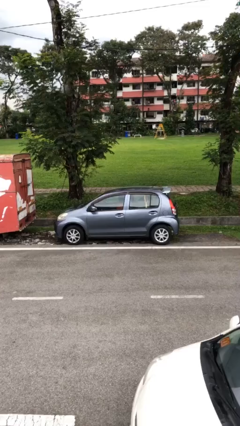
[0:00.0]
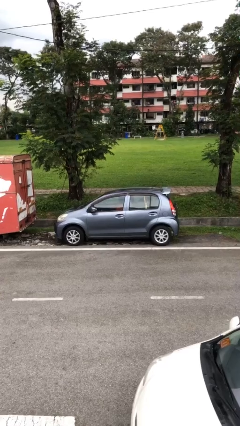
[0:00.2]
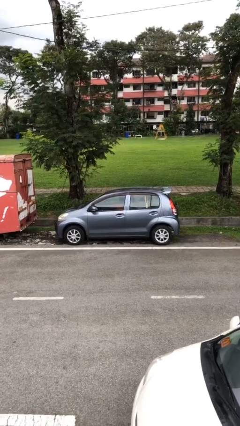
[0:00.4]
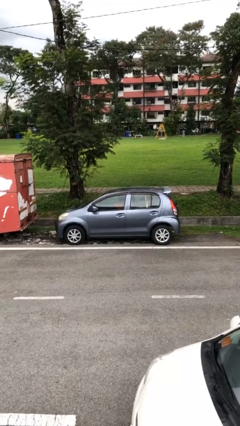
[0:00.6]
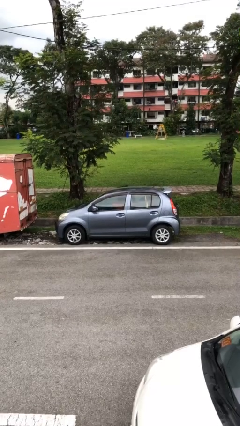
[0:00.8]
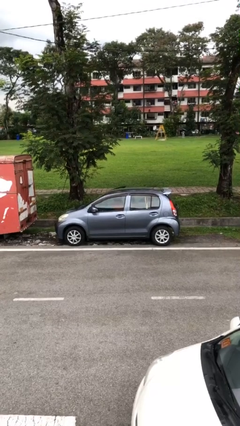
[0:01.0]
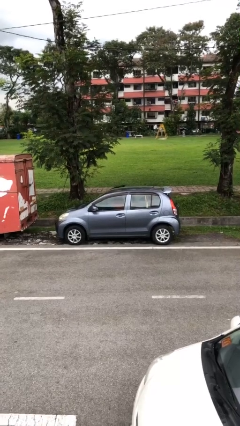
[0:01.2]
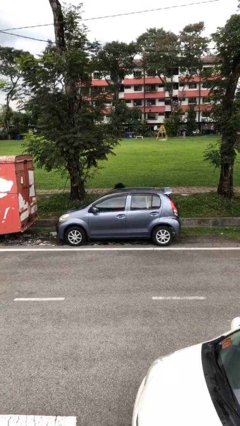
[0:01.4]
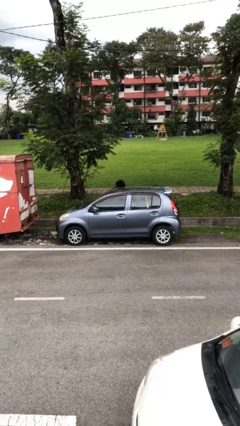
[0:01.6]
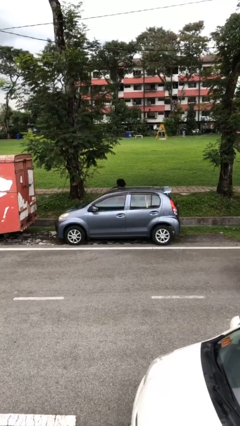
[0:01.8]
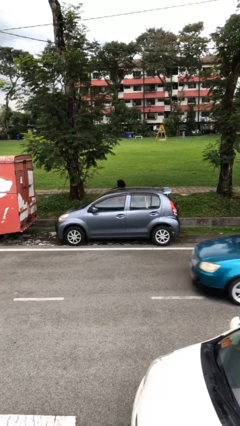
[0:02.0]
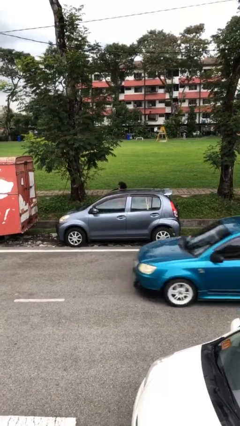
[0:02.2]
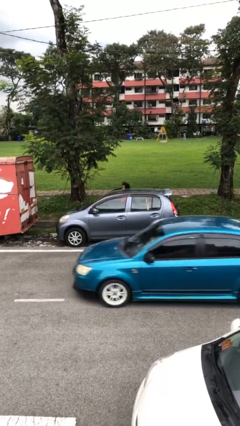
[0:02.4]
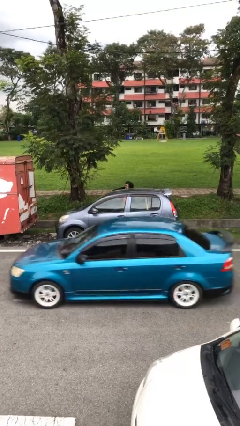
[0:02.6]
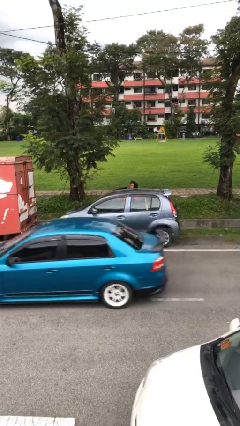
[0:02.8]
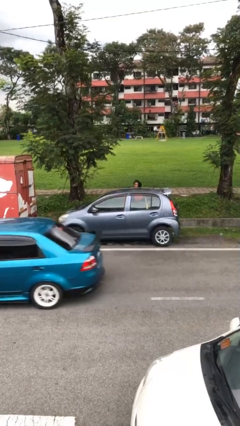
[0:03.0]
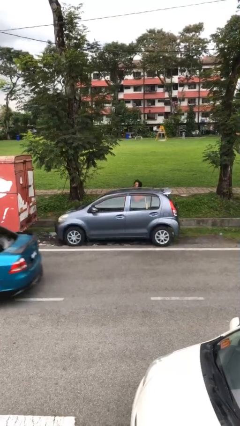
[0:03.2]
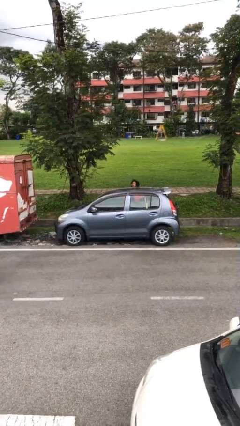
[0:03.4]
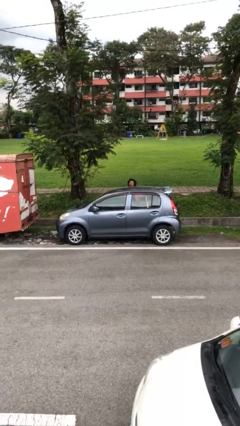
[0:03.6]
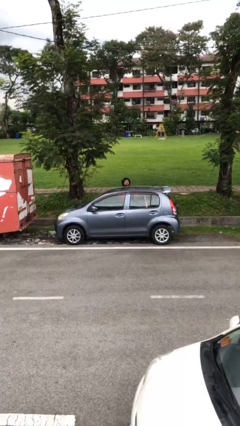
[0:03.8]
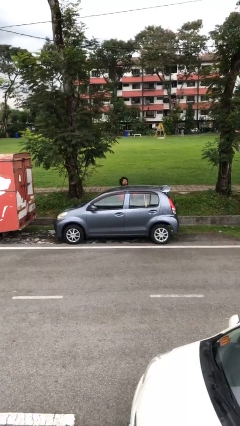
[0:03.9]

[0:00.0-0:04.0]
car drops off person

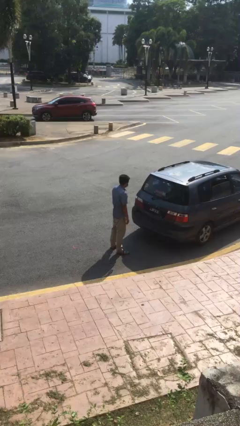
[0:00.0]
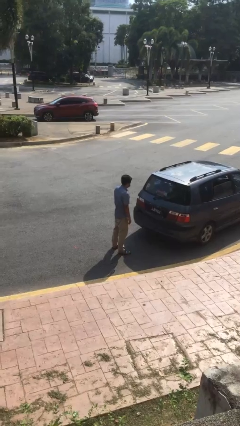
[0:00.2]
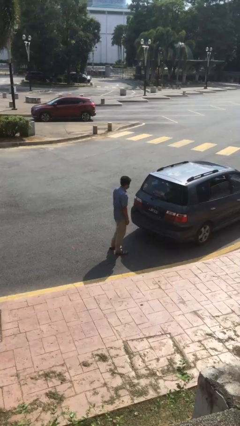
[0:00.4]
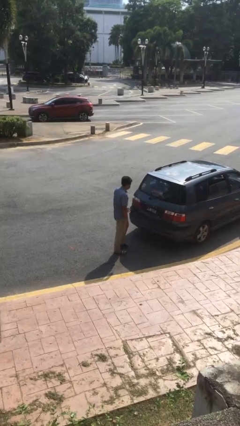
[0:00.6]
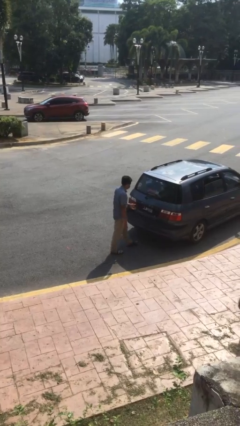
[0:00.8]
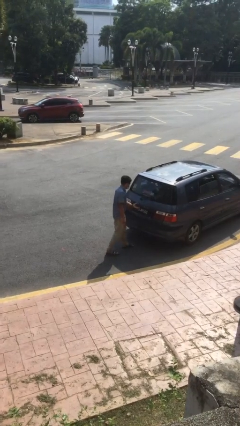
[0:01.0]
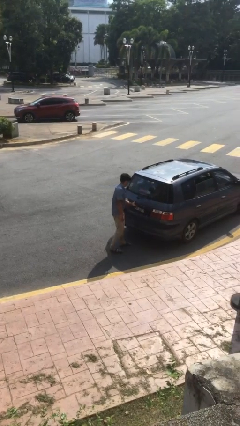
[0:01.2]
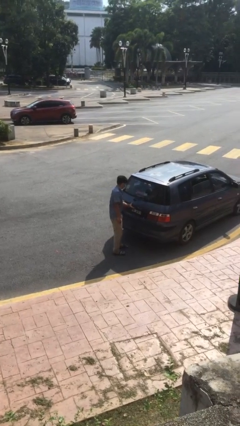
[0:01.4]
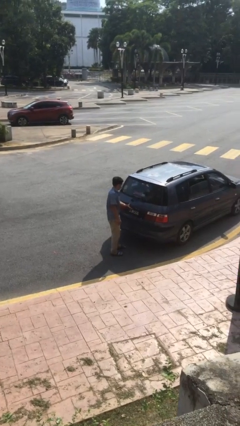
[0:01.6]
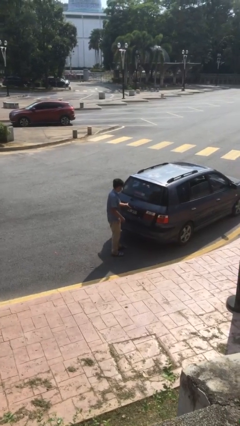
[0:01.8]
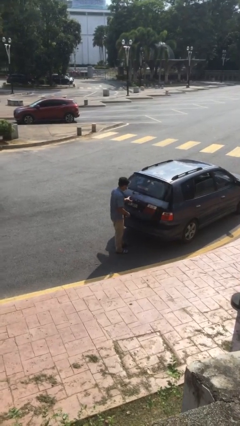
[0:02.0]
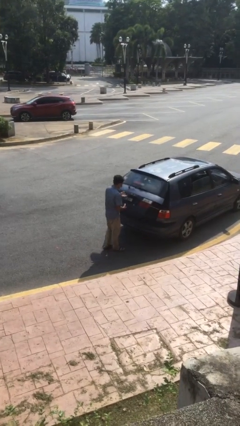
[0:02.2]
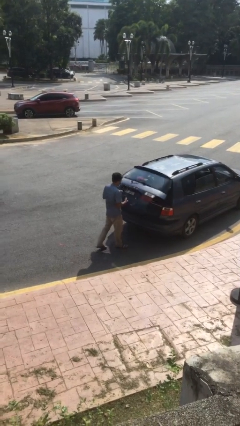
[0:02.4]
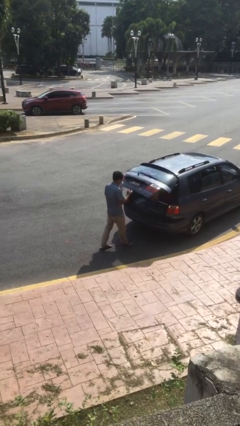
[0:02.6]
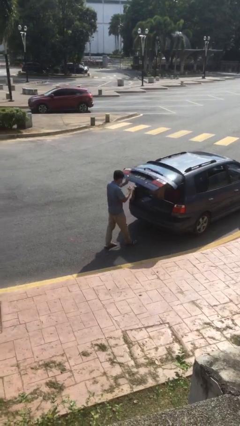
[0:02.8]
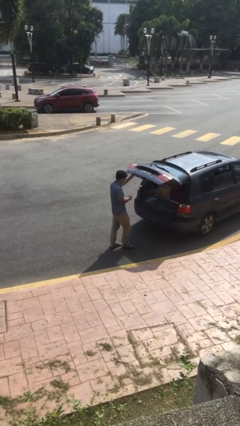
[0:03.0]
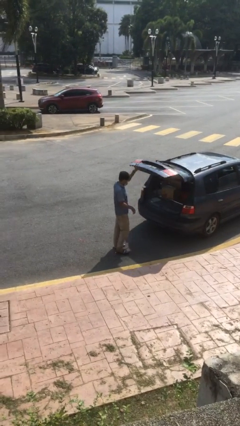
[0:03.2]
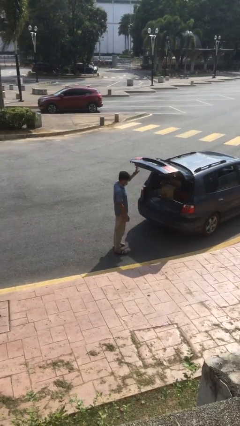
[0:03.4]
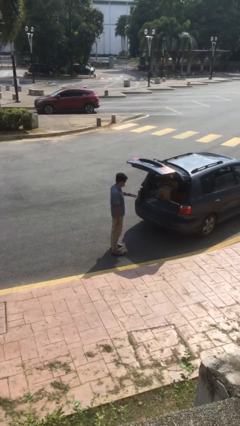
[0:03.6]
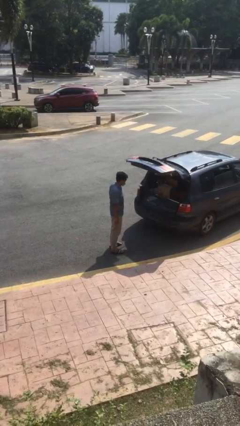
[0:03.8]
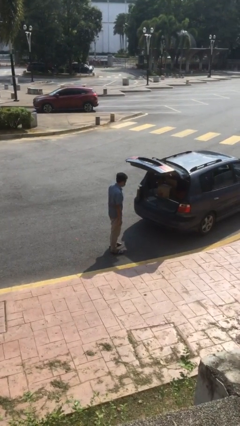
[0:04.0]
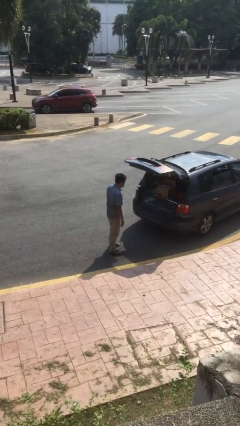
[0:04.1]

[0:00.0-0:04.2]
person opens car trunk

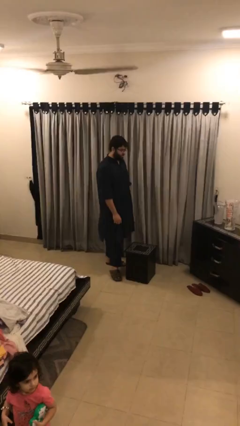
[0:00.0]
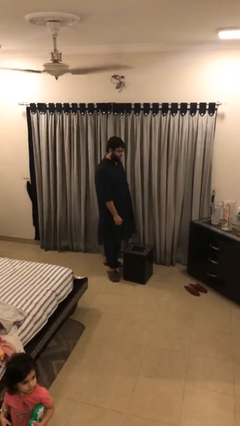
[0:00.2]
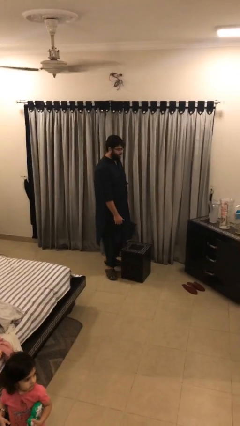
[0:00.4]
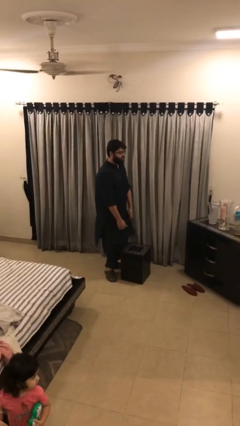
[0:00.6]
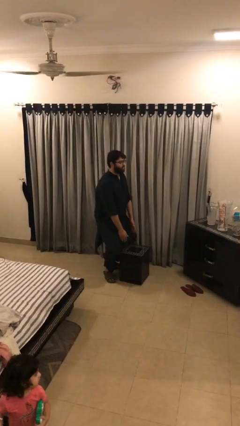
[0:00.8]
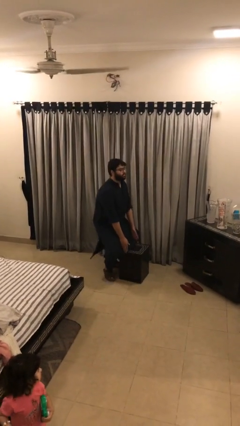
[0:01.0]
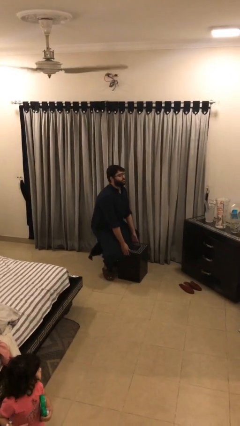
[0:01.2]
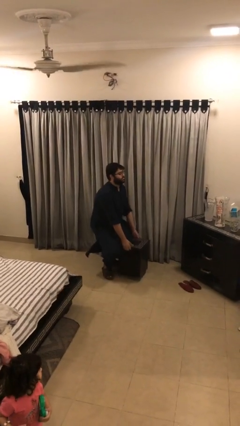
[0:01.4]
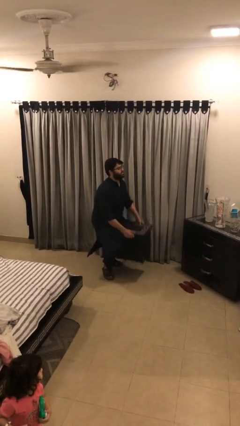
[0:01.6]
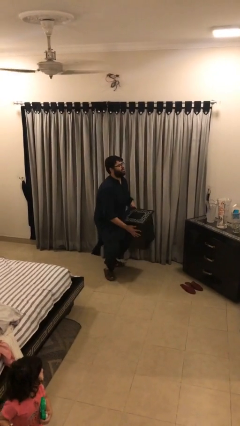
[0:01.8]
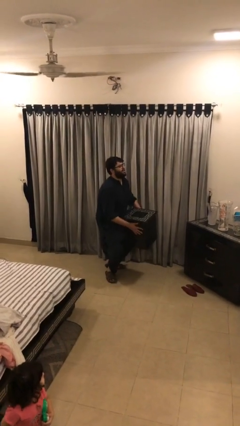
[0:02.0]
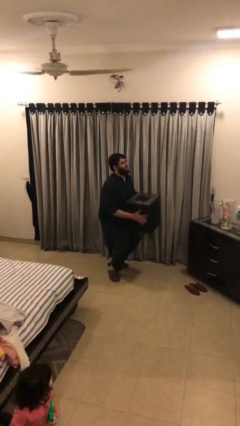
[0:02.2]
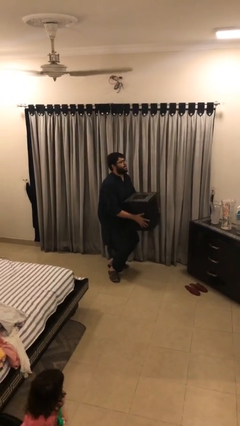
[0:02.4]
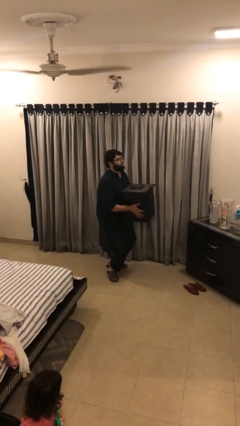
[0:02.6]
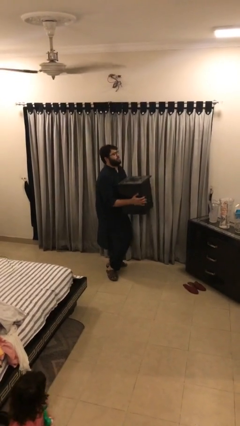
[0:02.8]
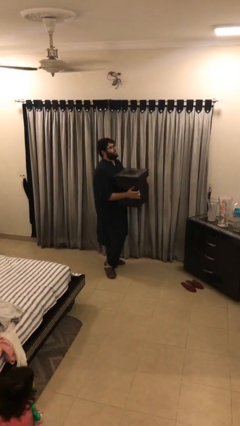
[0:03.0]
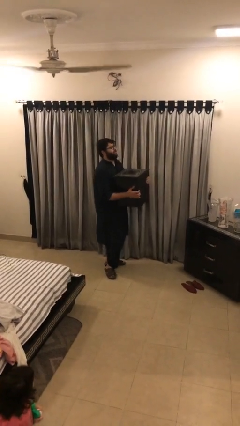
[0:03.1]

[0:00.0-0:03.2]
person picks up object from floor

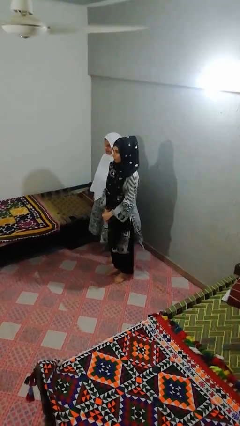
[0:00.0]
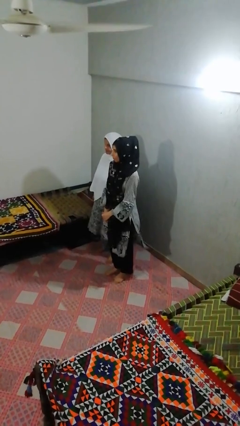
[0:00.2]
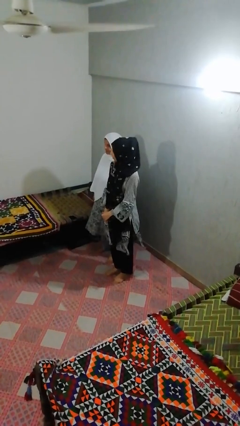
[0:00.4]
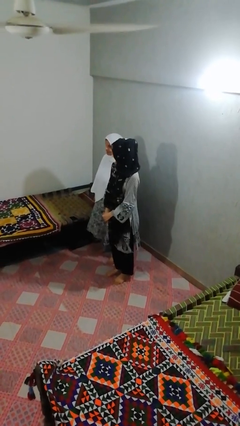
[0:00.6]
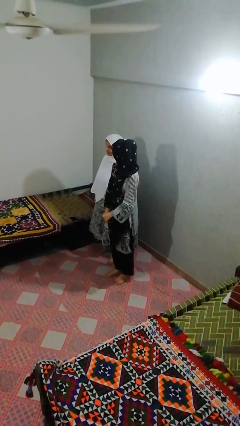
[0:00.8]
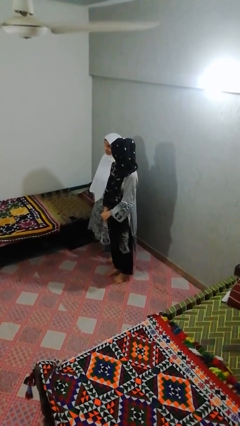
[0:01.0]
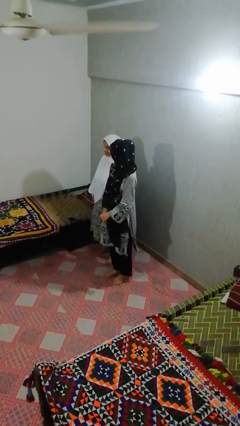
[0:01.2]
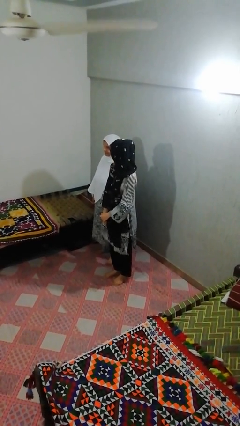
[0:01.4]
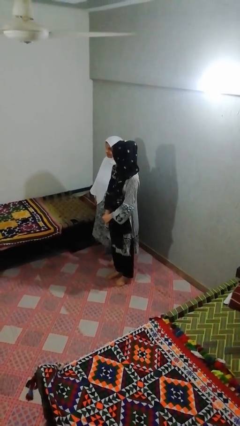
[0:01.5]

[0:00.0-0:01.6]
person looks over shoulder

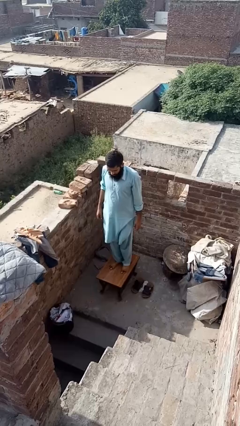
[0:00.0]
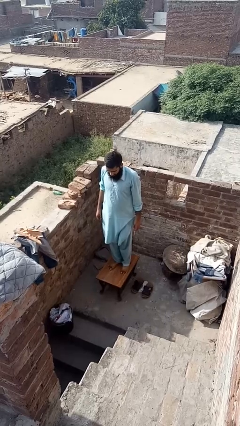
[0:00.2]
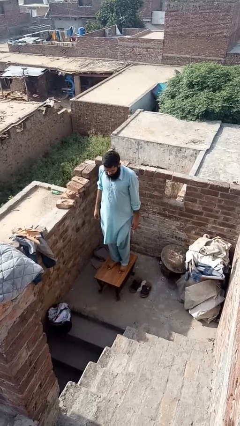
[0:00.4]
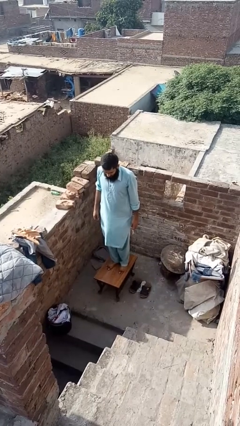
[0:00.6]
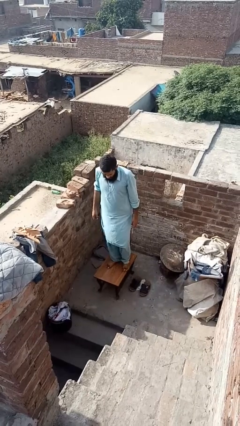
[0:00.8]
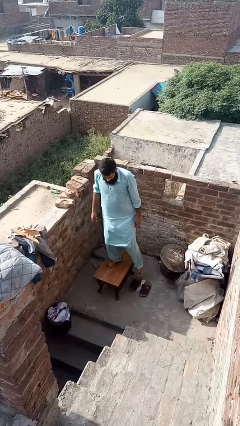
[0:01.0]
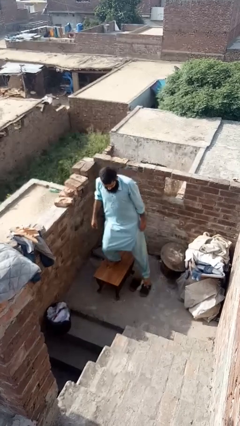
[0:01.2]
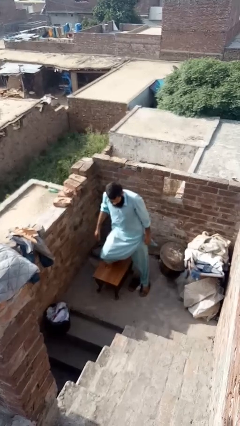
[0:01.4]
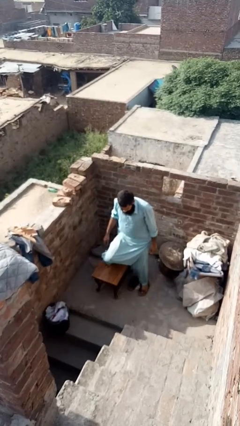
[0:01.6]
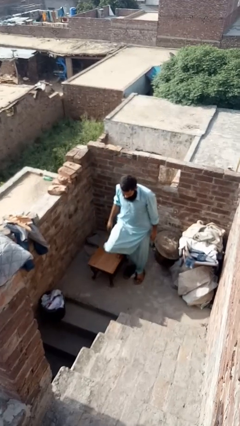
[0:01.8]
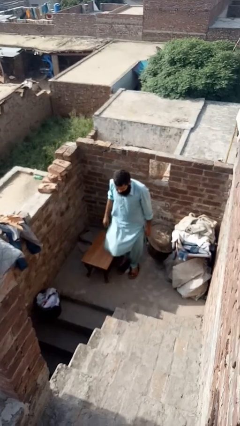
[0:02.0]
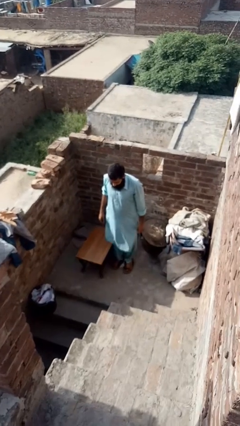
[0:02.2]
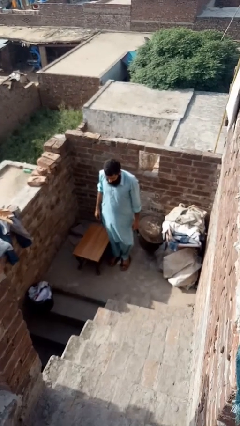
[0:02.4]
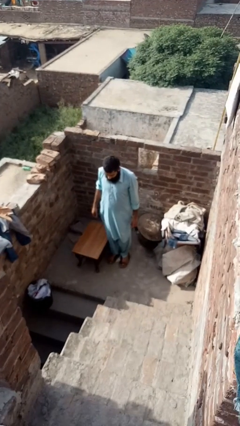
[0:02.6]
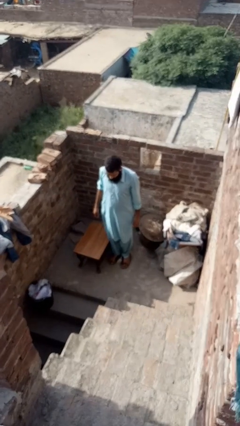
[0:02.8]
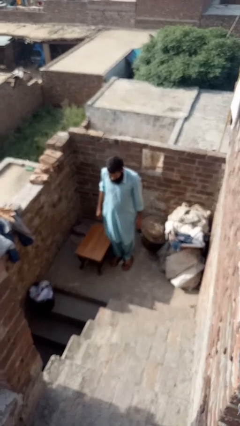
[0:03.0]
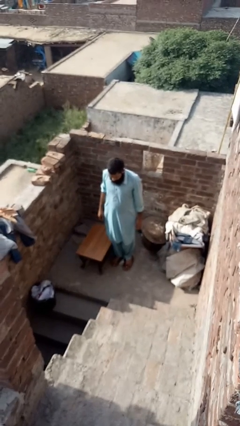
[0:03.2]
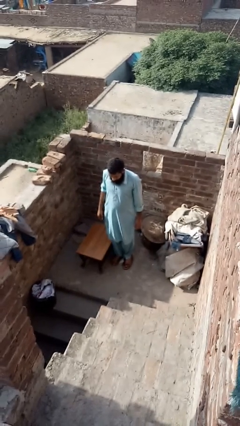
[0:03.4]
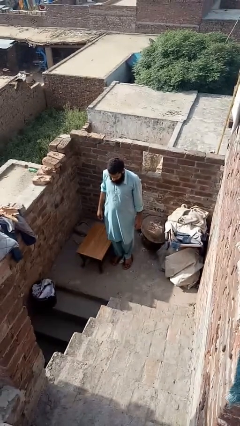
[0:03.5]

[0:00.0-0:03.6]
person climbs off table

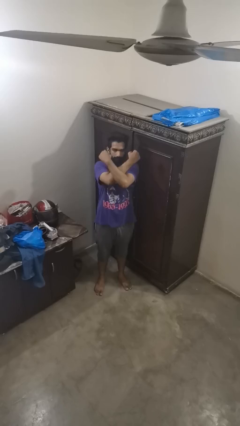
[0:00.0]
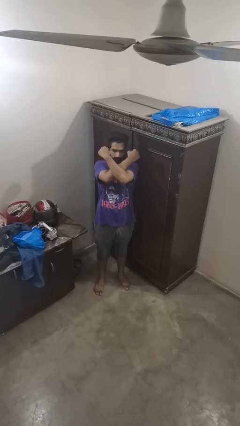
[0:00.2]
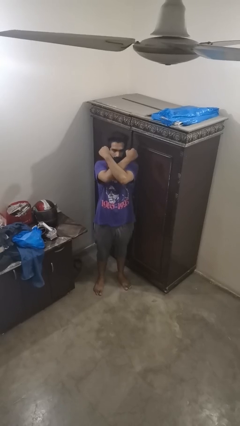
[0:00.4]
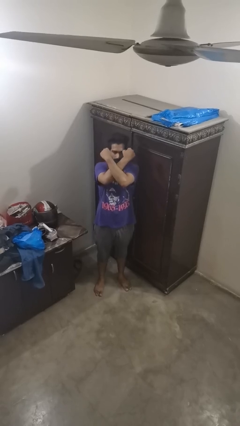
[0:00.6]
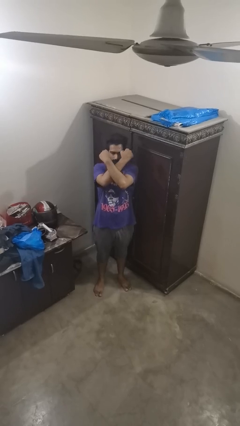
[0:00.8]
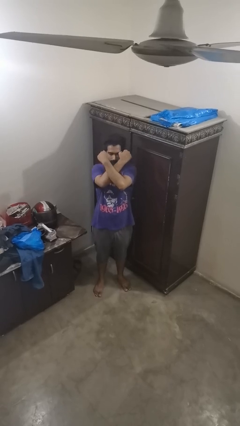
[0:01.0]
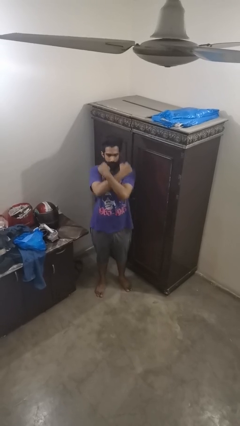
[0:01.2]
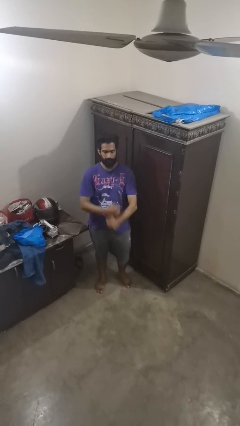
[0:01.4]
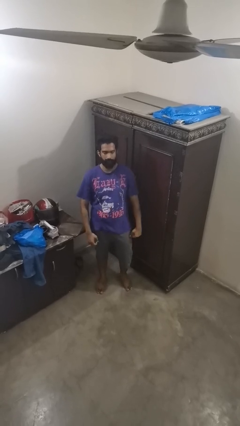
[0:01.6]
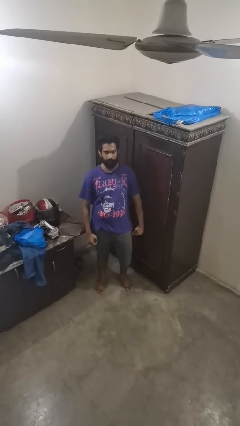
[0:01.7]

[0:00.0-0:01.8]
person gestures arms x
